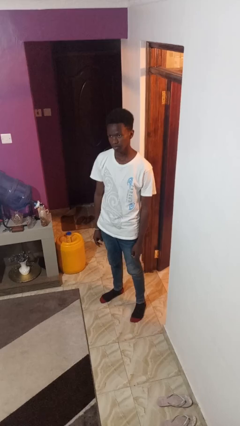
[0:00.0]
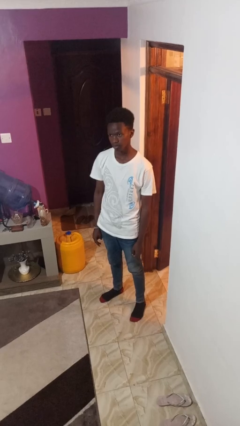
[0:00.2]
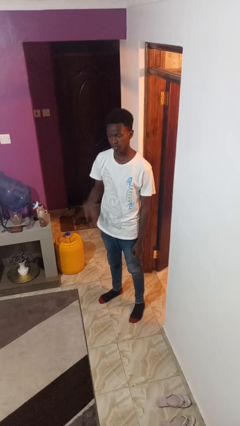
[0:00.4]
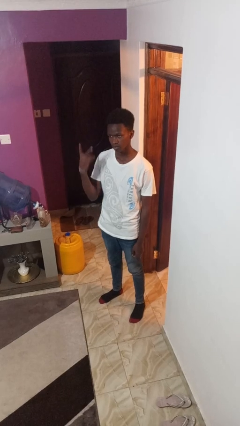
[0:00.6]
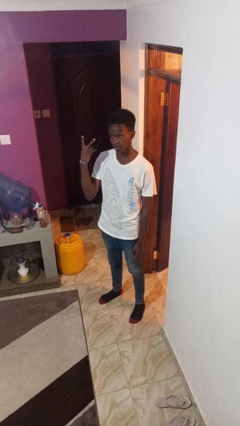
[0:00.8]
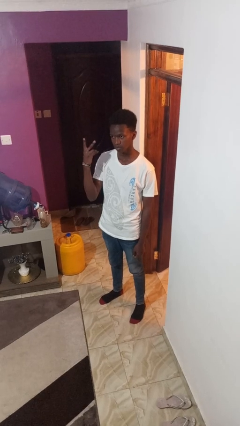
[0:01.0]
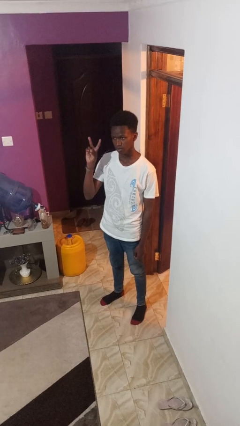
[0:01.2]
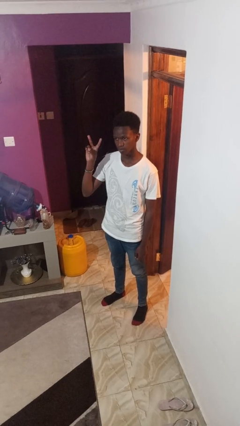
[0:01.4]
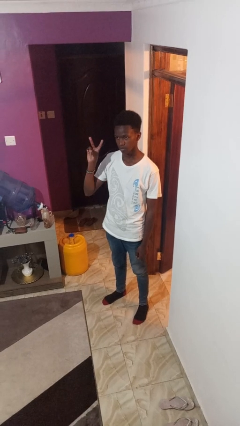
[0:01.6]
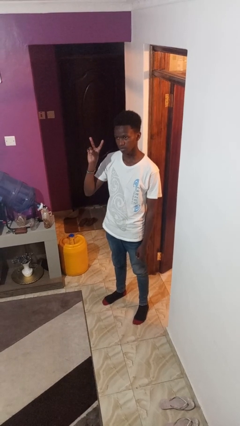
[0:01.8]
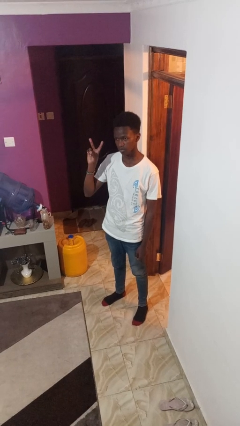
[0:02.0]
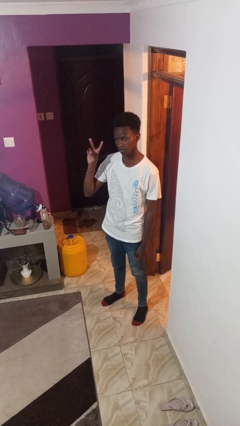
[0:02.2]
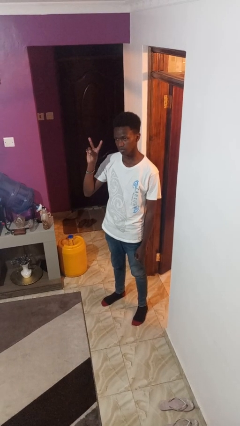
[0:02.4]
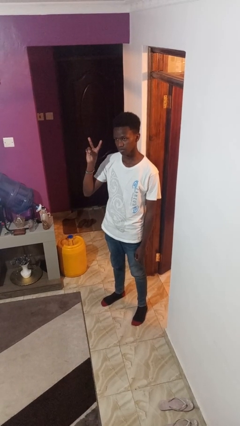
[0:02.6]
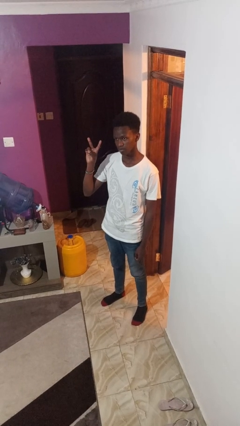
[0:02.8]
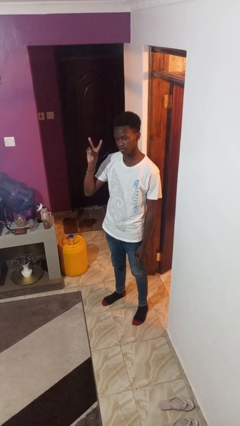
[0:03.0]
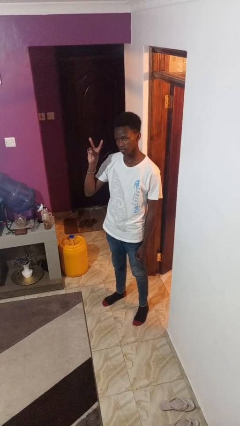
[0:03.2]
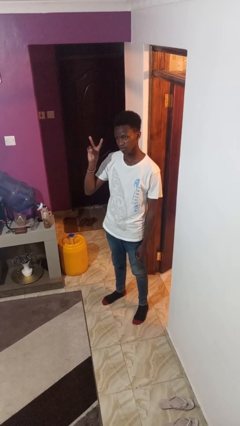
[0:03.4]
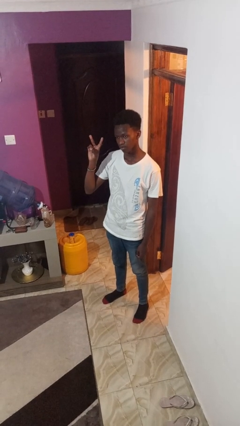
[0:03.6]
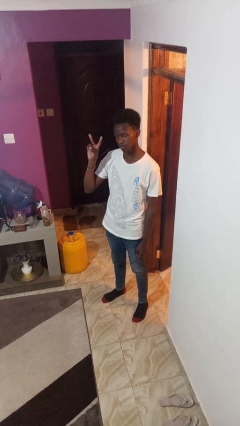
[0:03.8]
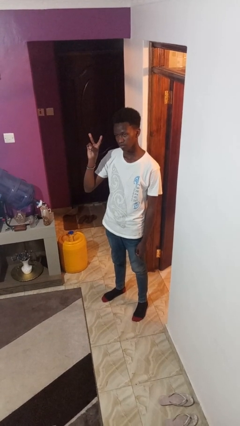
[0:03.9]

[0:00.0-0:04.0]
person gestures peace

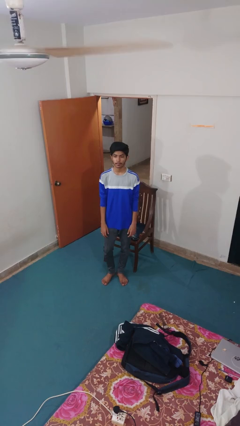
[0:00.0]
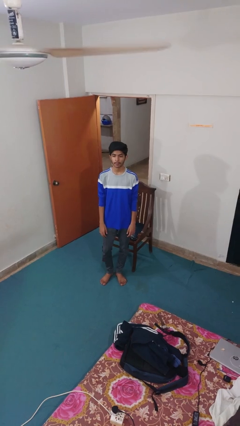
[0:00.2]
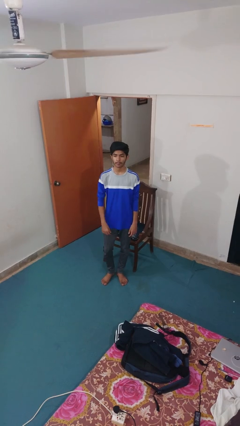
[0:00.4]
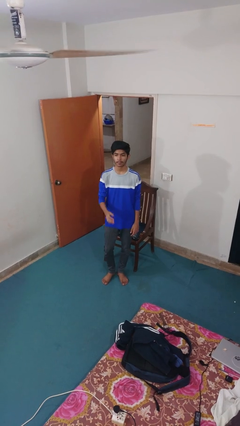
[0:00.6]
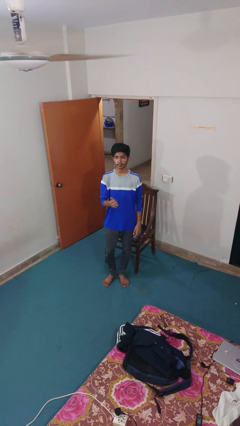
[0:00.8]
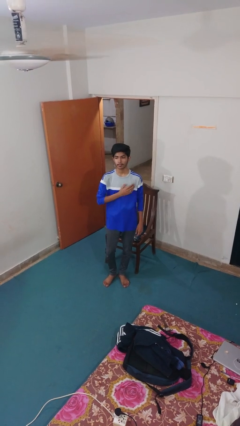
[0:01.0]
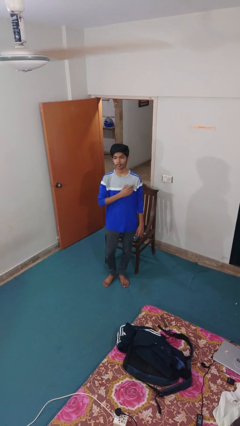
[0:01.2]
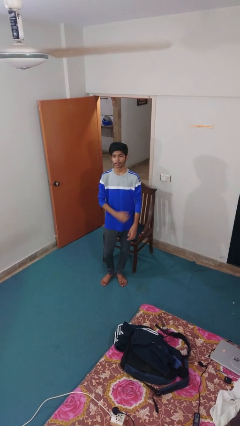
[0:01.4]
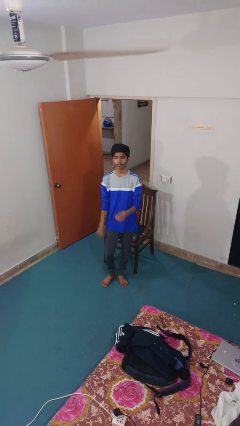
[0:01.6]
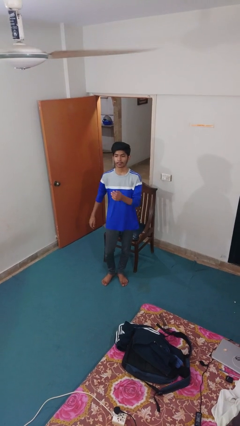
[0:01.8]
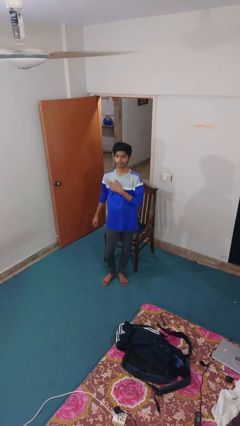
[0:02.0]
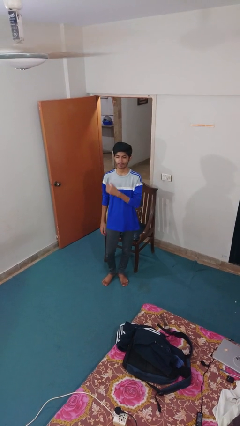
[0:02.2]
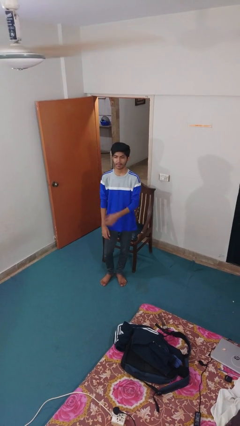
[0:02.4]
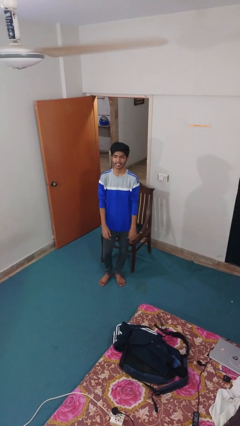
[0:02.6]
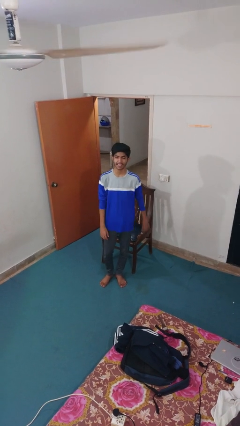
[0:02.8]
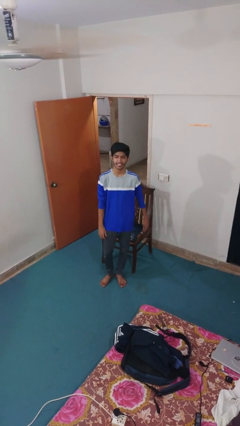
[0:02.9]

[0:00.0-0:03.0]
person drums on chest

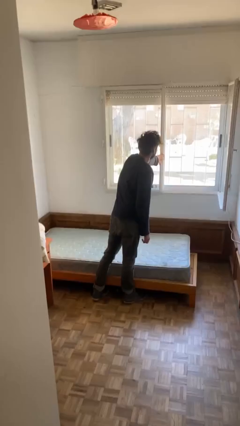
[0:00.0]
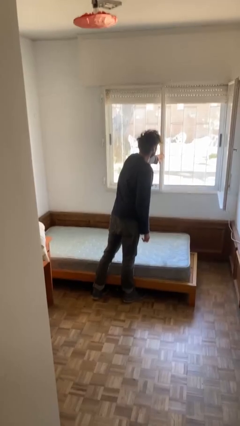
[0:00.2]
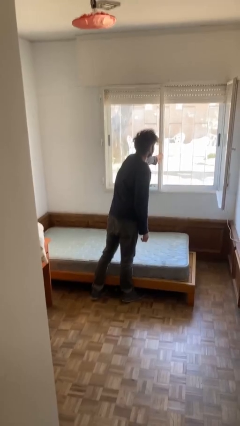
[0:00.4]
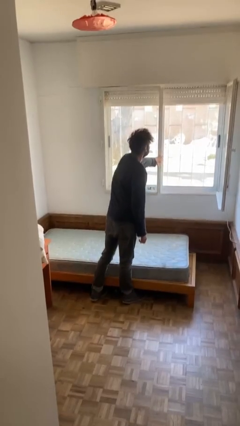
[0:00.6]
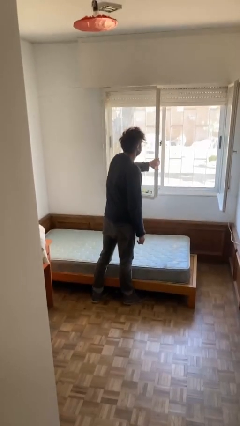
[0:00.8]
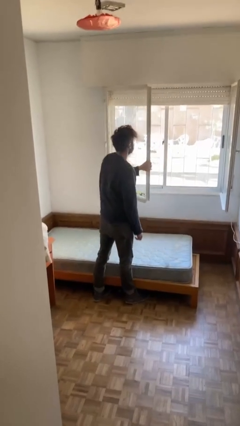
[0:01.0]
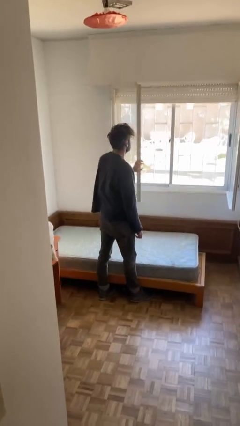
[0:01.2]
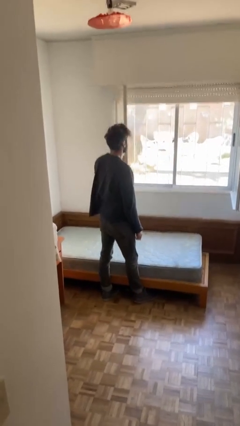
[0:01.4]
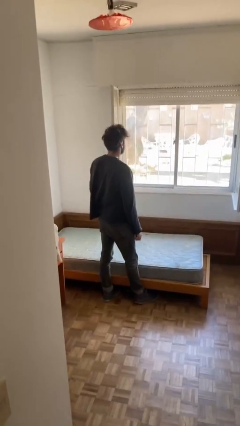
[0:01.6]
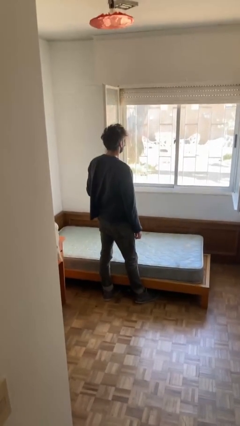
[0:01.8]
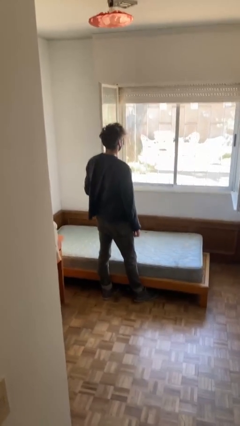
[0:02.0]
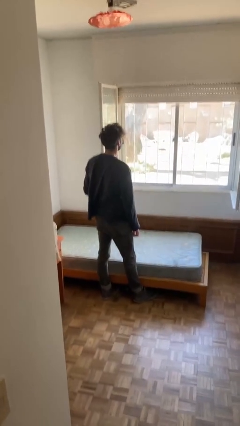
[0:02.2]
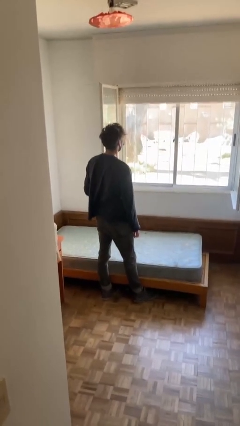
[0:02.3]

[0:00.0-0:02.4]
person opens home window

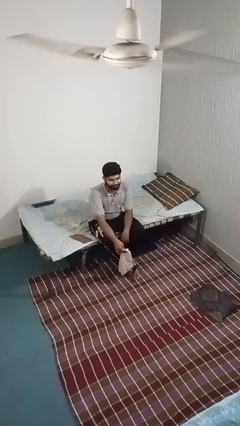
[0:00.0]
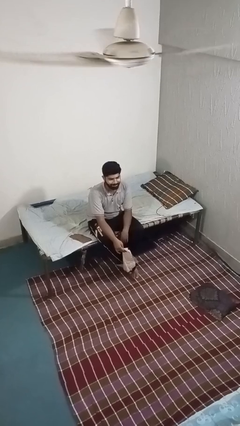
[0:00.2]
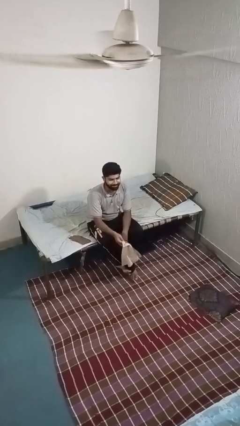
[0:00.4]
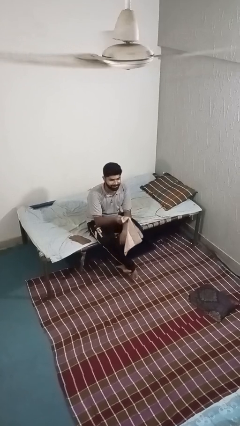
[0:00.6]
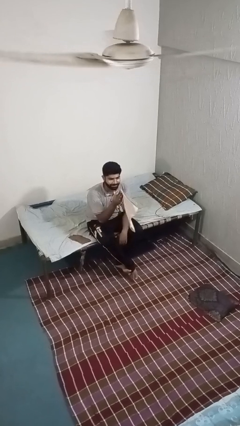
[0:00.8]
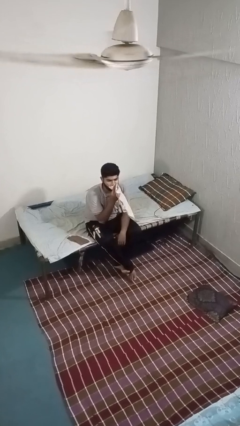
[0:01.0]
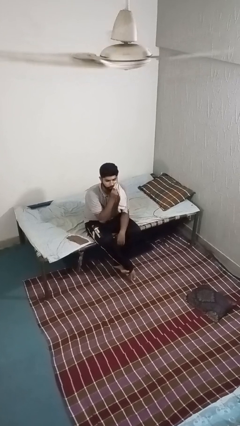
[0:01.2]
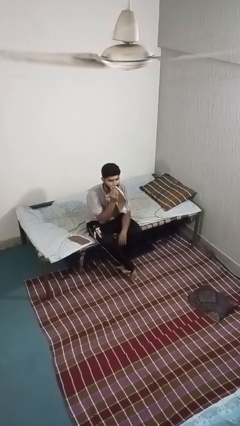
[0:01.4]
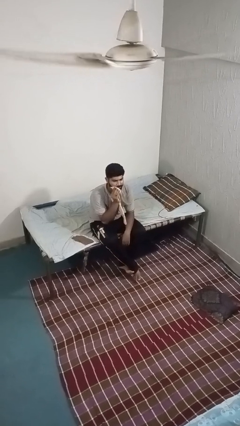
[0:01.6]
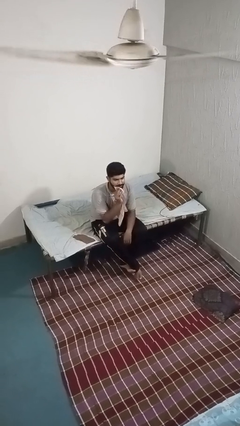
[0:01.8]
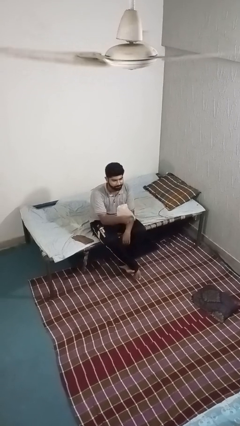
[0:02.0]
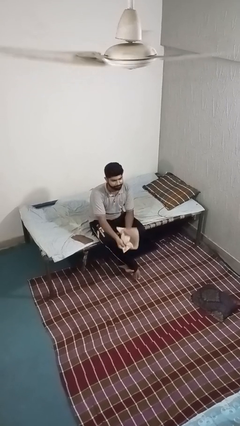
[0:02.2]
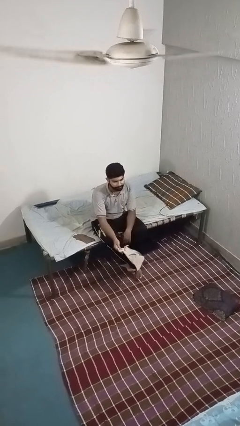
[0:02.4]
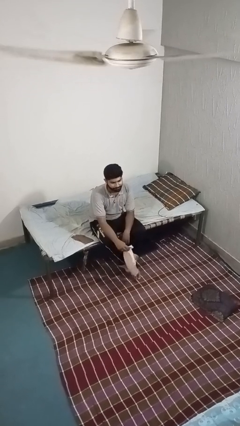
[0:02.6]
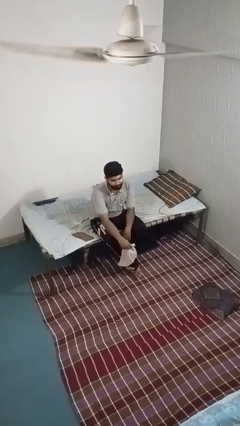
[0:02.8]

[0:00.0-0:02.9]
person wipes mouth with napkin

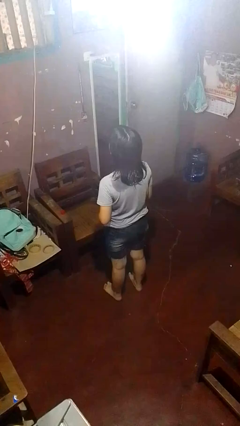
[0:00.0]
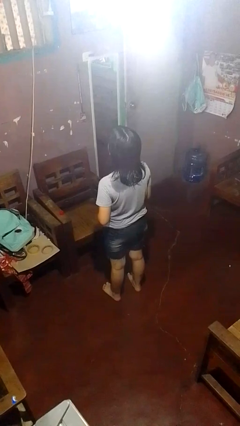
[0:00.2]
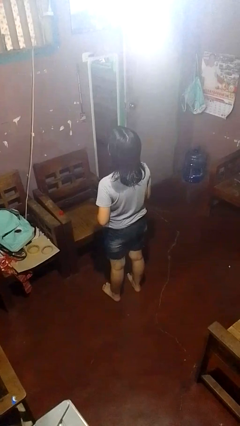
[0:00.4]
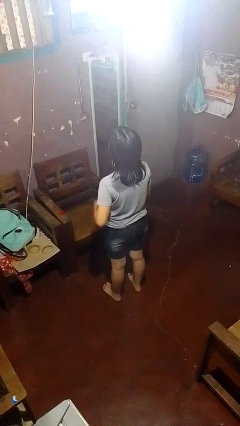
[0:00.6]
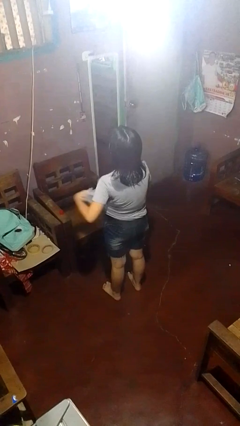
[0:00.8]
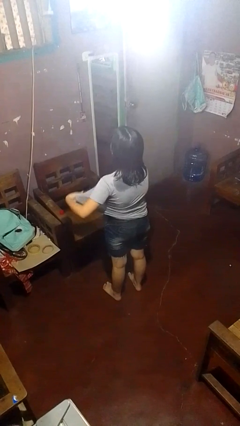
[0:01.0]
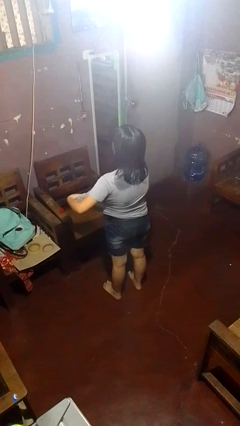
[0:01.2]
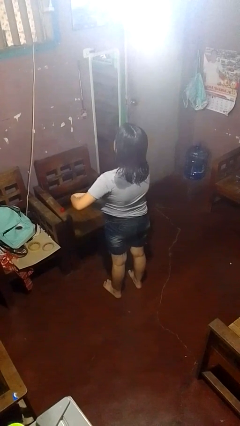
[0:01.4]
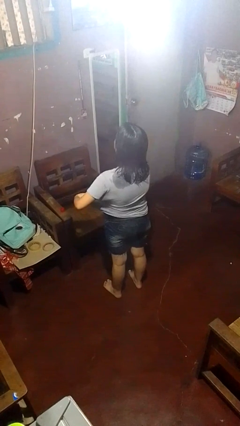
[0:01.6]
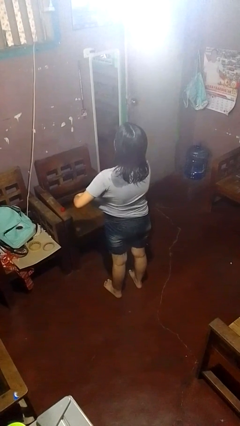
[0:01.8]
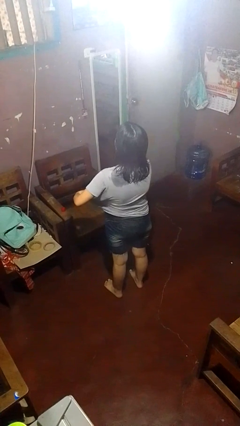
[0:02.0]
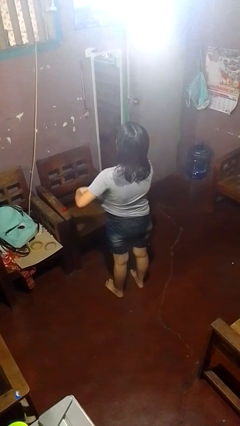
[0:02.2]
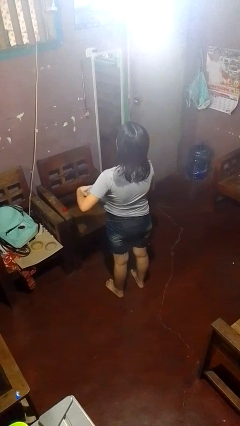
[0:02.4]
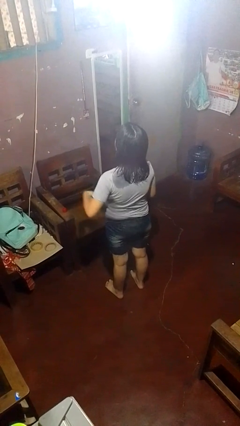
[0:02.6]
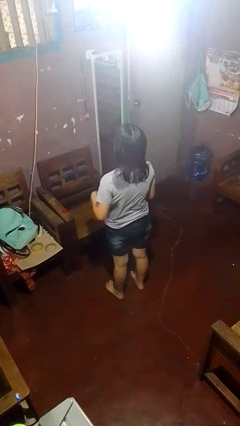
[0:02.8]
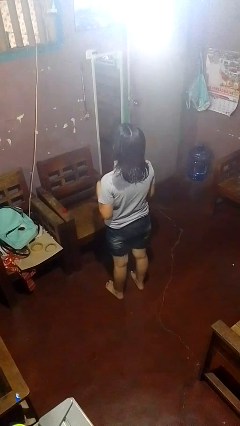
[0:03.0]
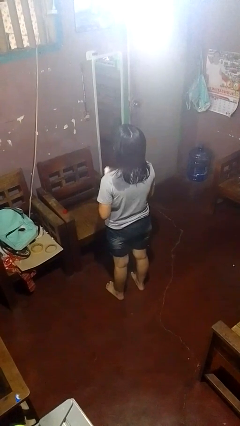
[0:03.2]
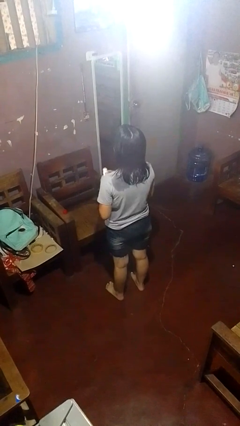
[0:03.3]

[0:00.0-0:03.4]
person applies deodorant

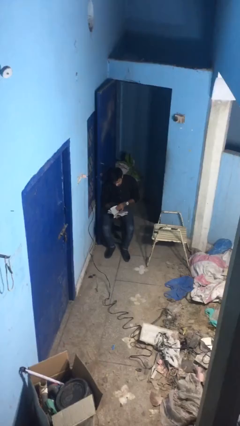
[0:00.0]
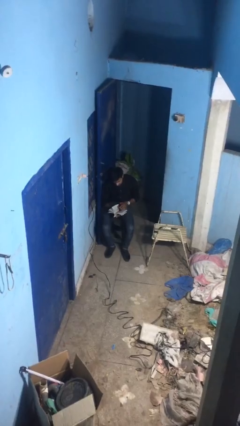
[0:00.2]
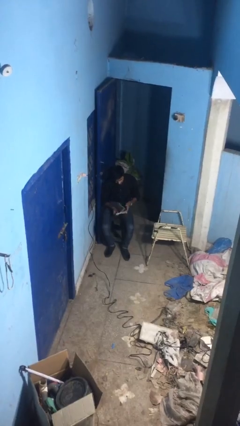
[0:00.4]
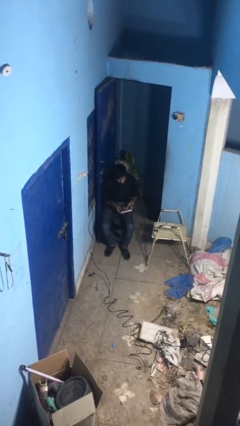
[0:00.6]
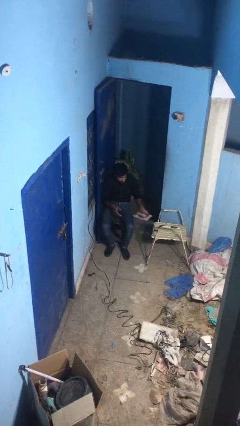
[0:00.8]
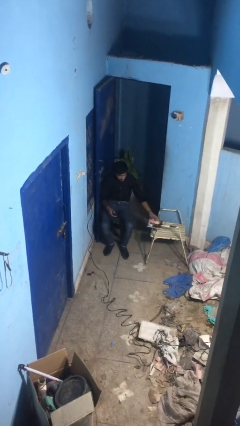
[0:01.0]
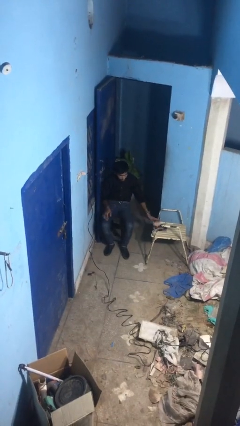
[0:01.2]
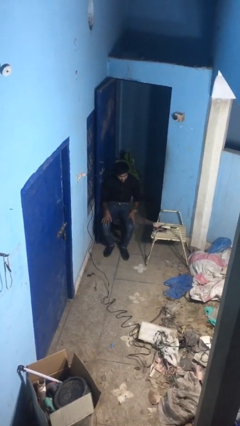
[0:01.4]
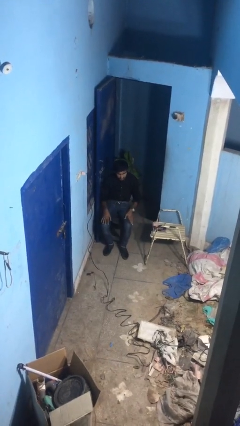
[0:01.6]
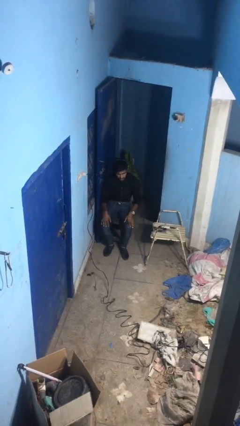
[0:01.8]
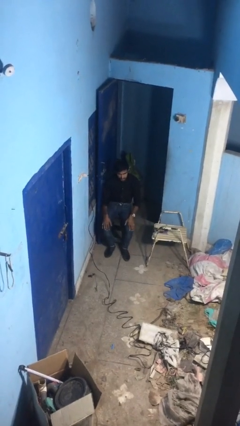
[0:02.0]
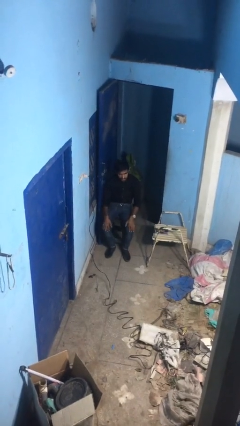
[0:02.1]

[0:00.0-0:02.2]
person puts down object on table
